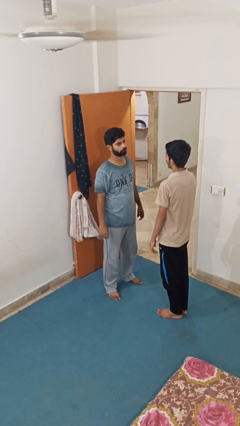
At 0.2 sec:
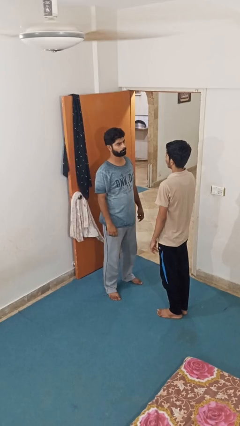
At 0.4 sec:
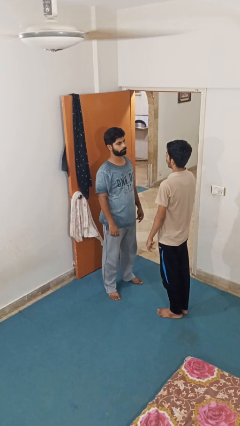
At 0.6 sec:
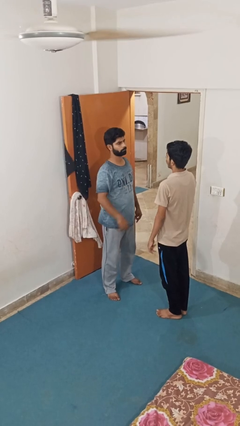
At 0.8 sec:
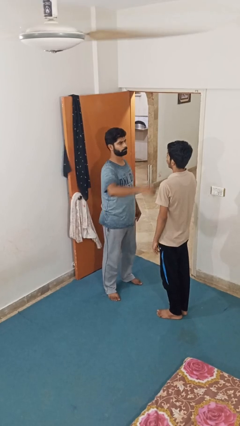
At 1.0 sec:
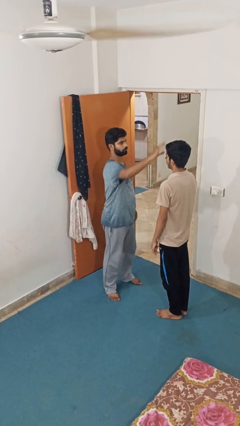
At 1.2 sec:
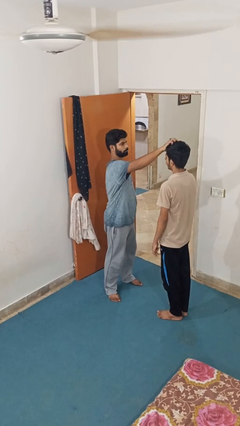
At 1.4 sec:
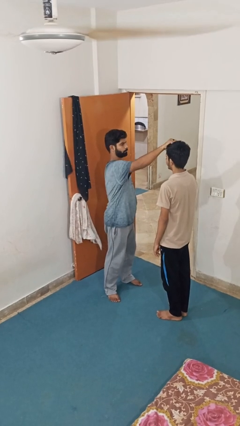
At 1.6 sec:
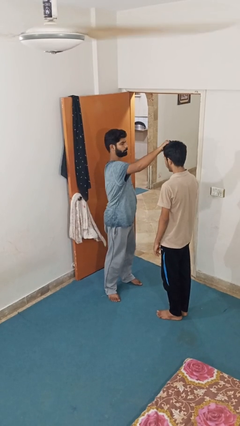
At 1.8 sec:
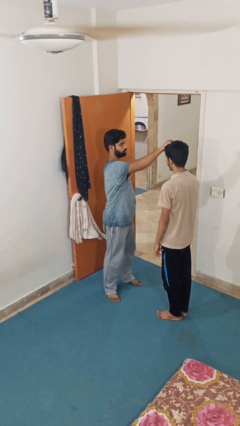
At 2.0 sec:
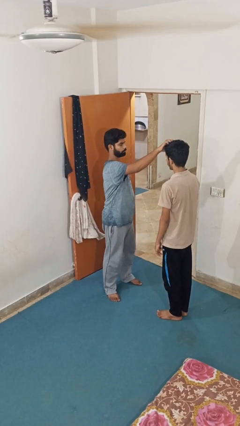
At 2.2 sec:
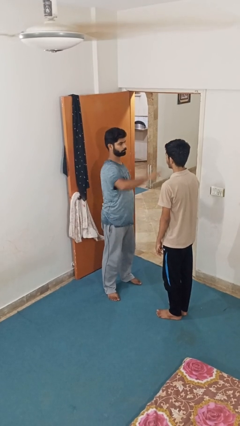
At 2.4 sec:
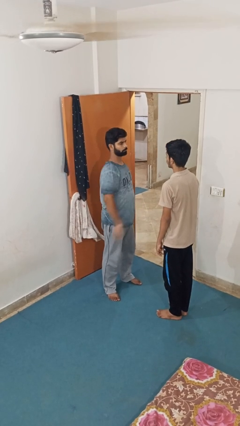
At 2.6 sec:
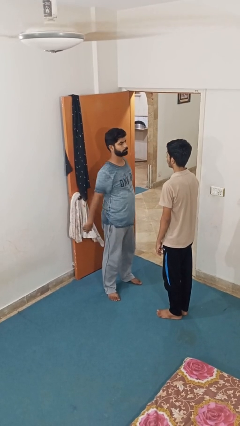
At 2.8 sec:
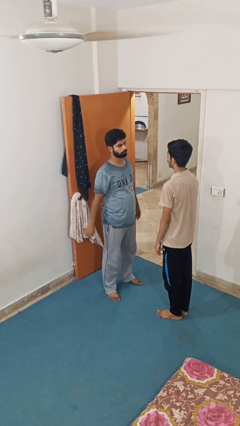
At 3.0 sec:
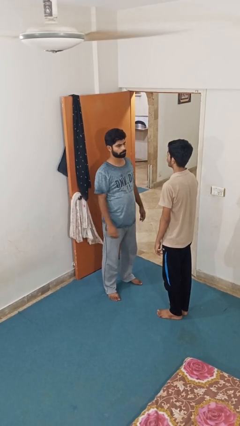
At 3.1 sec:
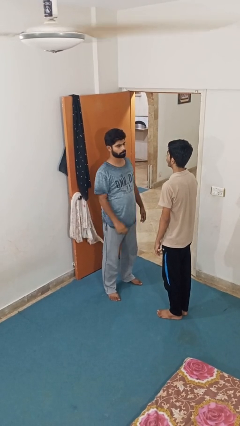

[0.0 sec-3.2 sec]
person grabs person by hair

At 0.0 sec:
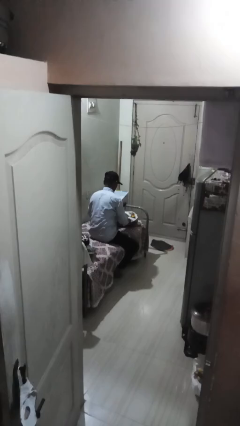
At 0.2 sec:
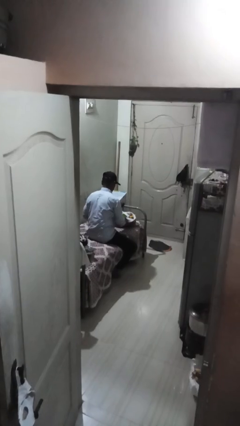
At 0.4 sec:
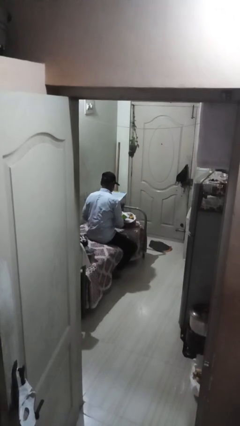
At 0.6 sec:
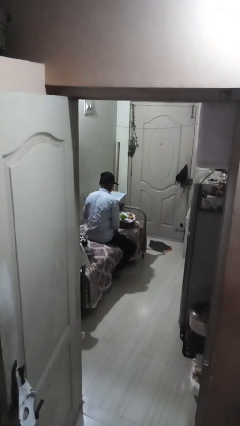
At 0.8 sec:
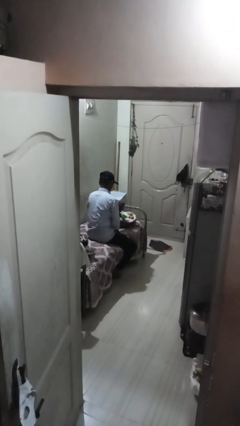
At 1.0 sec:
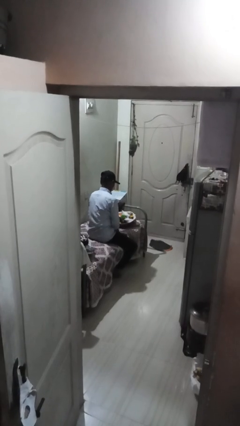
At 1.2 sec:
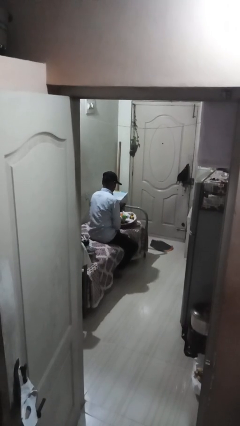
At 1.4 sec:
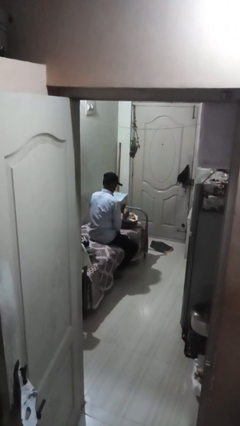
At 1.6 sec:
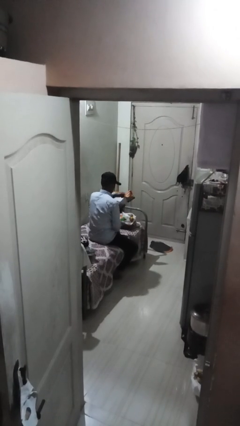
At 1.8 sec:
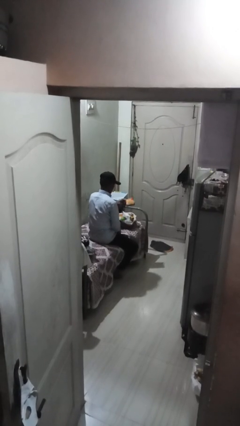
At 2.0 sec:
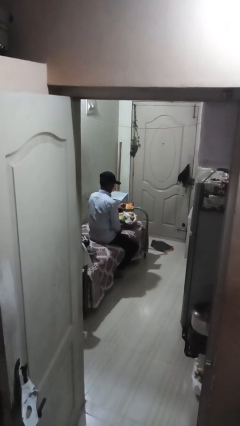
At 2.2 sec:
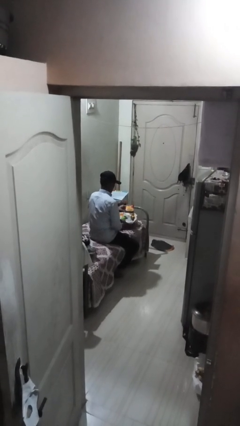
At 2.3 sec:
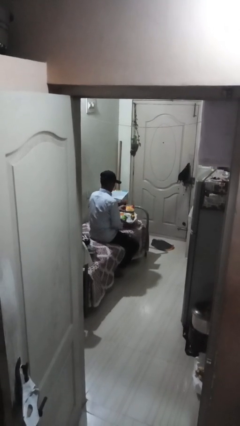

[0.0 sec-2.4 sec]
person takes object from bag

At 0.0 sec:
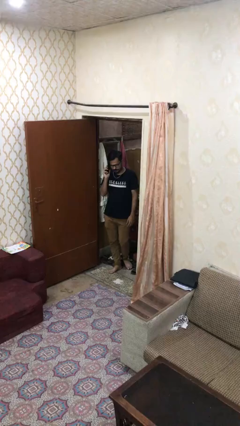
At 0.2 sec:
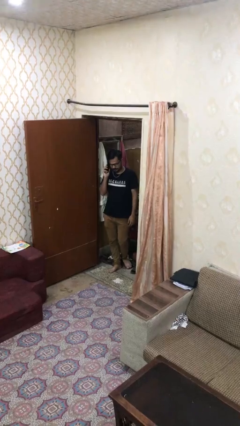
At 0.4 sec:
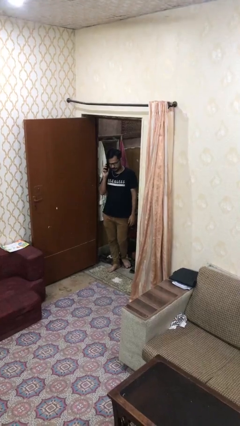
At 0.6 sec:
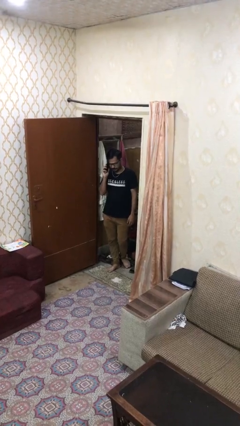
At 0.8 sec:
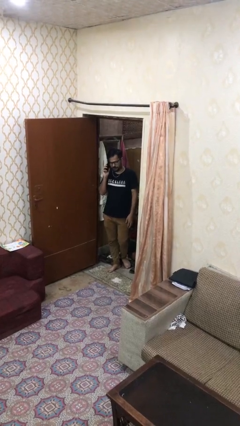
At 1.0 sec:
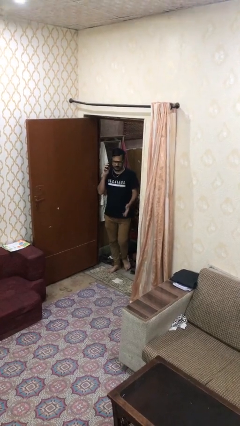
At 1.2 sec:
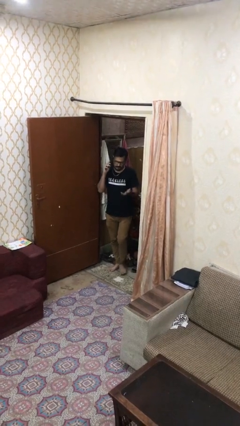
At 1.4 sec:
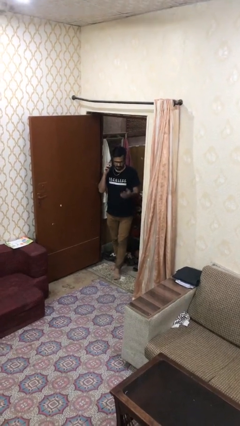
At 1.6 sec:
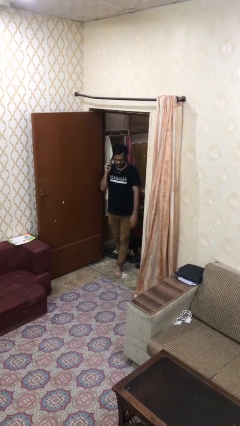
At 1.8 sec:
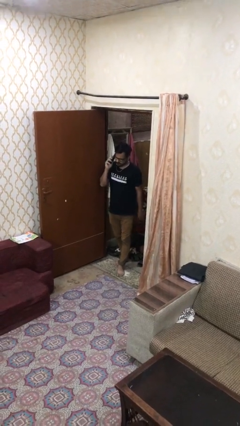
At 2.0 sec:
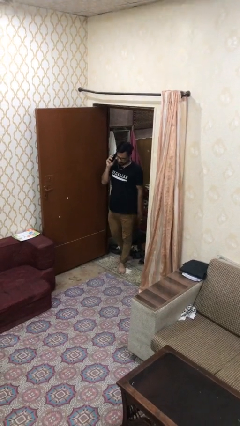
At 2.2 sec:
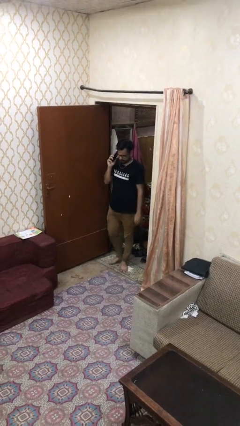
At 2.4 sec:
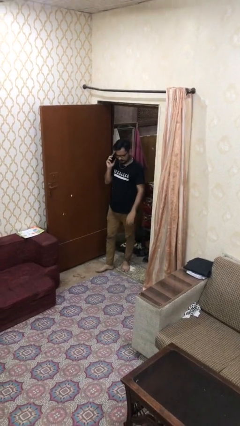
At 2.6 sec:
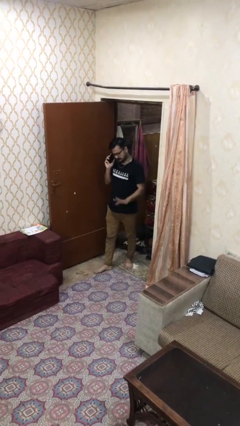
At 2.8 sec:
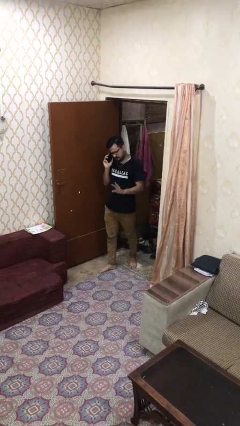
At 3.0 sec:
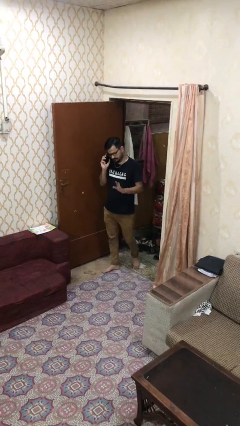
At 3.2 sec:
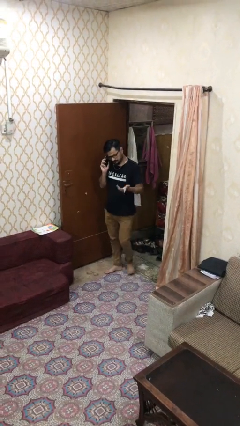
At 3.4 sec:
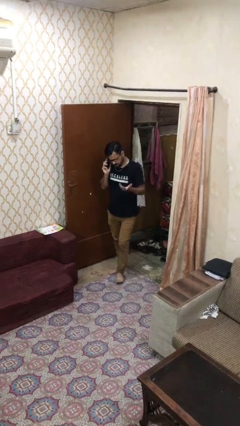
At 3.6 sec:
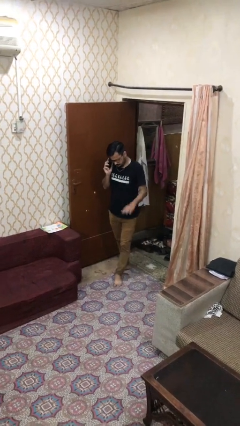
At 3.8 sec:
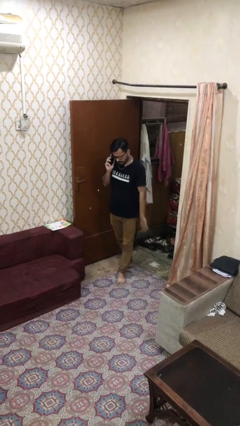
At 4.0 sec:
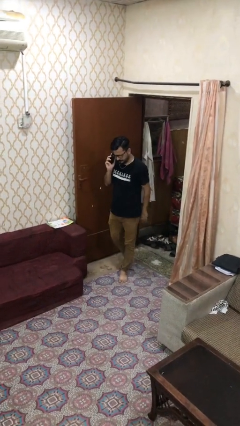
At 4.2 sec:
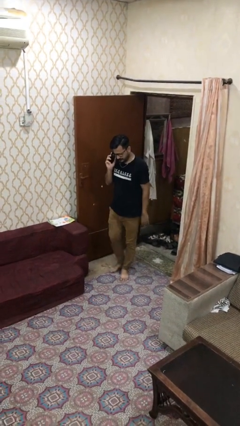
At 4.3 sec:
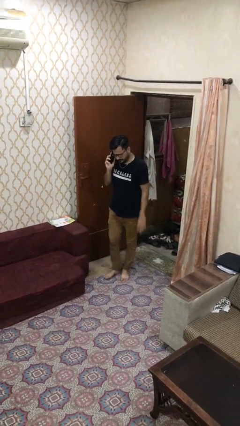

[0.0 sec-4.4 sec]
person enters scene through structure

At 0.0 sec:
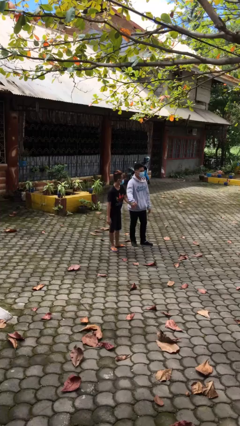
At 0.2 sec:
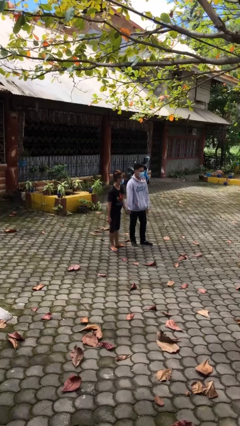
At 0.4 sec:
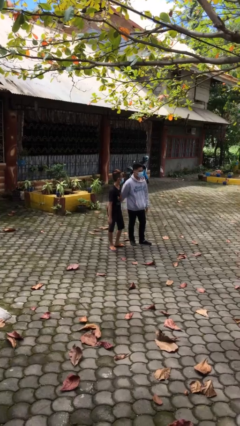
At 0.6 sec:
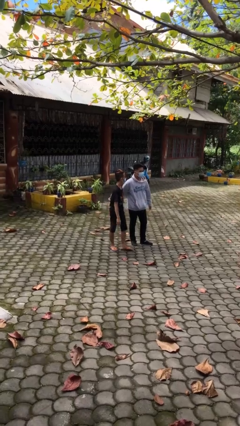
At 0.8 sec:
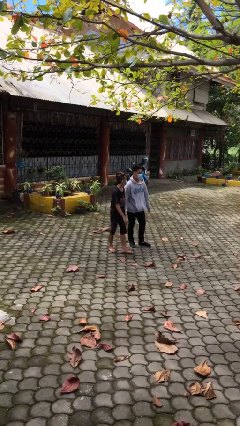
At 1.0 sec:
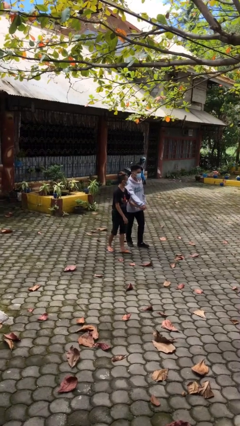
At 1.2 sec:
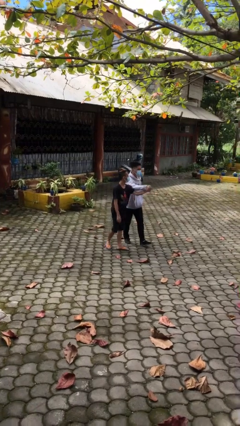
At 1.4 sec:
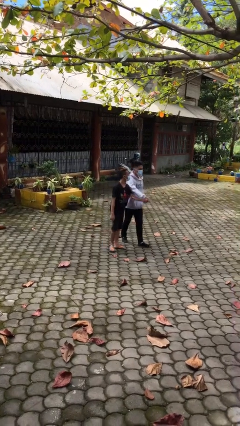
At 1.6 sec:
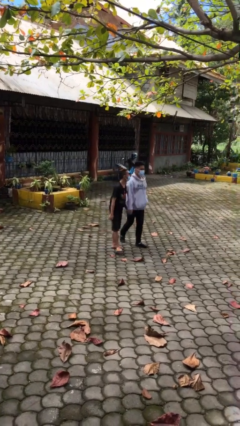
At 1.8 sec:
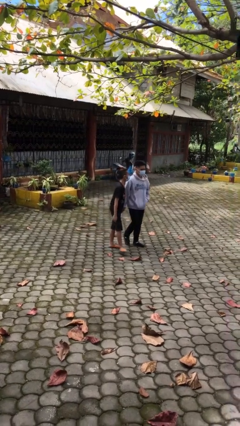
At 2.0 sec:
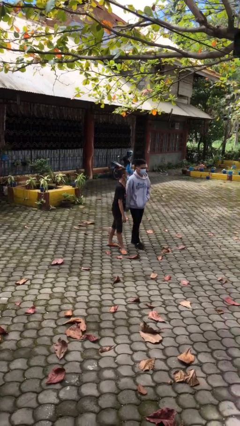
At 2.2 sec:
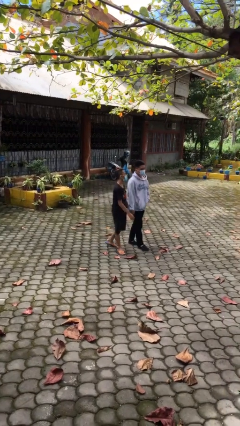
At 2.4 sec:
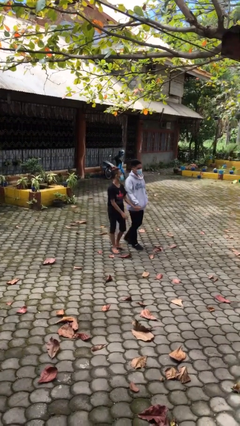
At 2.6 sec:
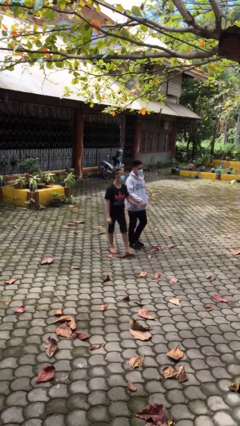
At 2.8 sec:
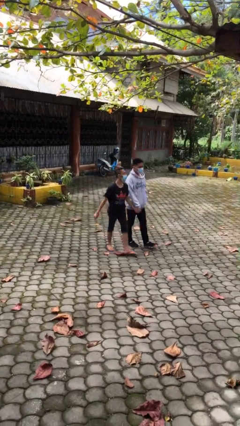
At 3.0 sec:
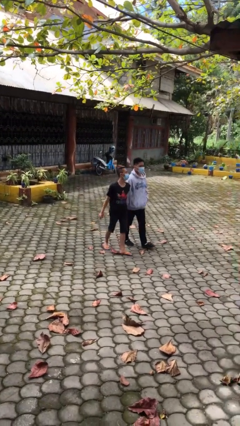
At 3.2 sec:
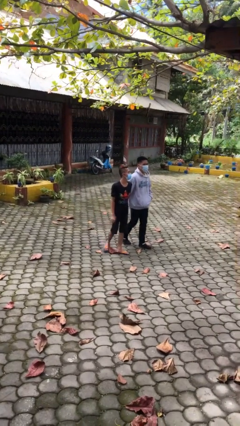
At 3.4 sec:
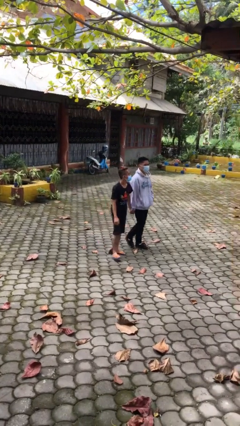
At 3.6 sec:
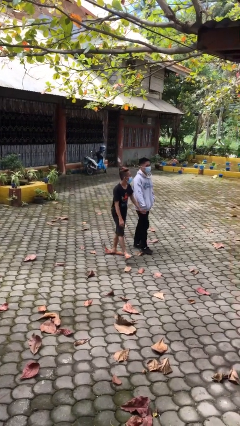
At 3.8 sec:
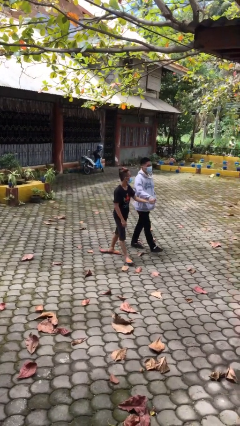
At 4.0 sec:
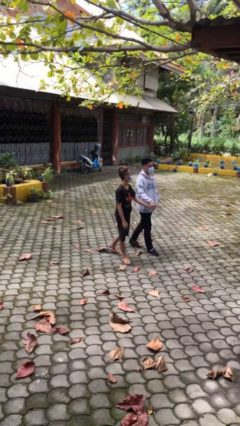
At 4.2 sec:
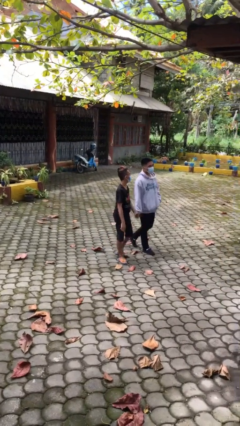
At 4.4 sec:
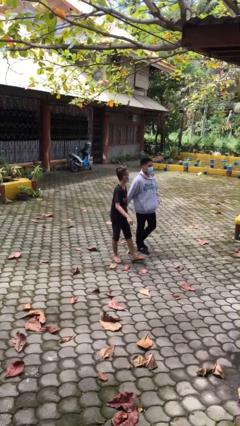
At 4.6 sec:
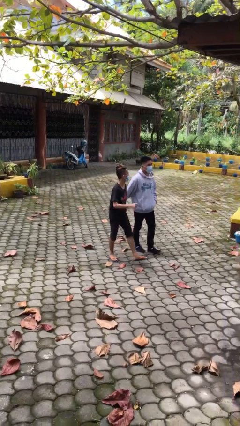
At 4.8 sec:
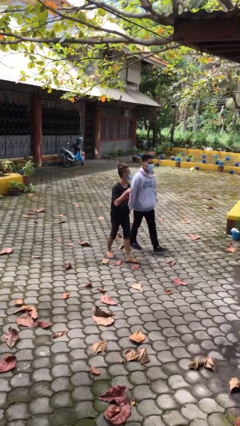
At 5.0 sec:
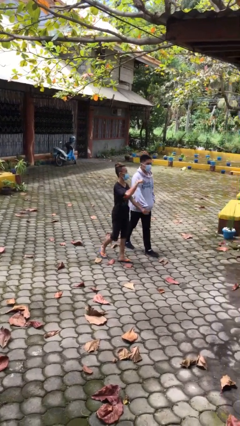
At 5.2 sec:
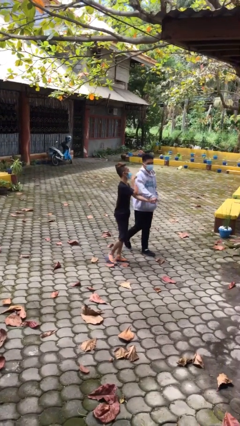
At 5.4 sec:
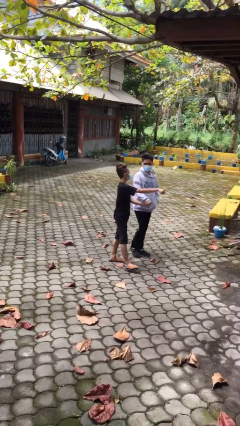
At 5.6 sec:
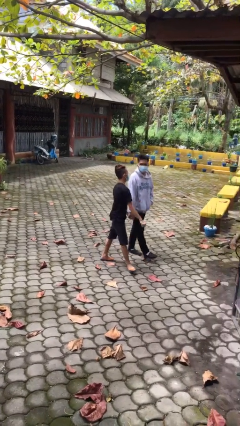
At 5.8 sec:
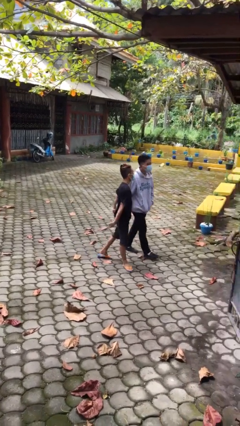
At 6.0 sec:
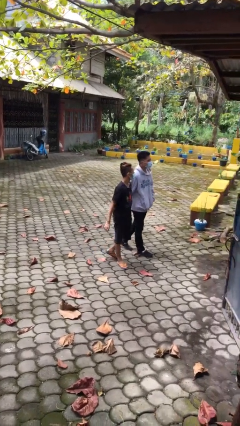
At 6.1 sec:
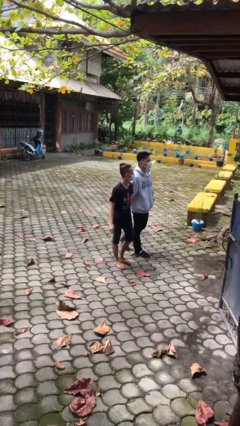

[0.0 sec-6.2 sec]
person holds hand

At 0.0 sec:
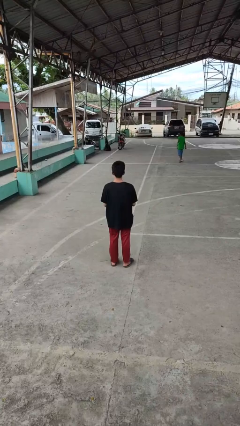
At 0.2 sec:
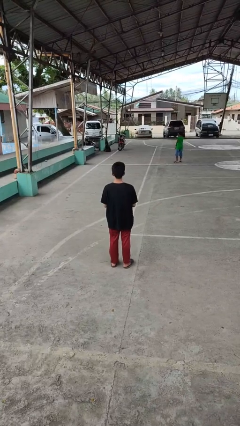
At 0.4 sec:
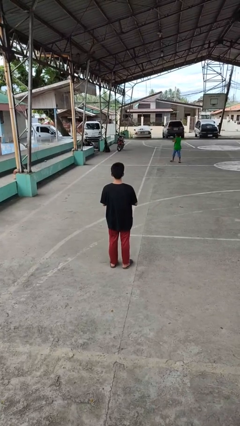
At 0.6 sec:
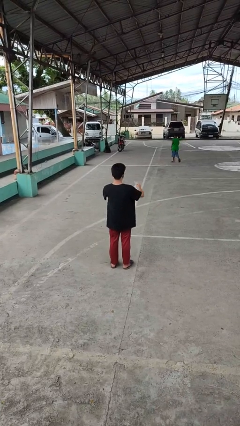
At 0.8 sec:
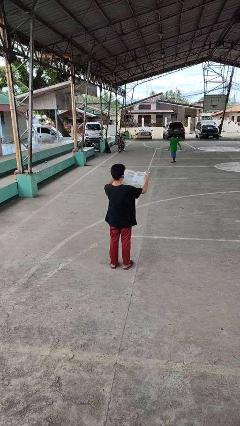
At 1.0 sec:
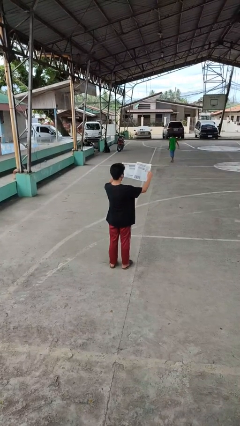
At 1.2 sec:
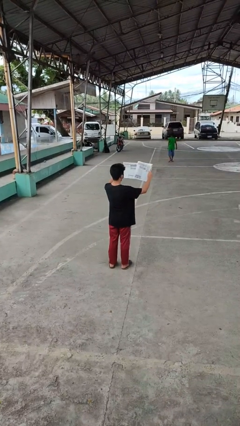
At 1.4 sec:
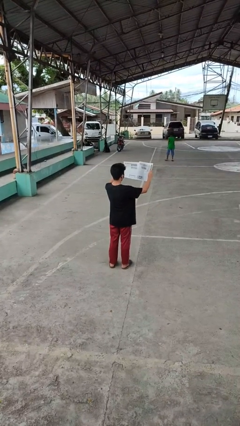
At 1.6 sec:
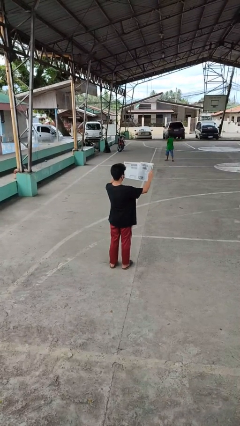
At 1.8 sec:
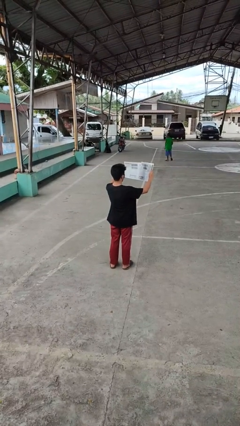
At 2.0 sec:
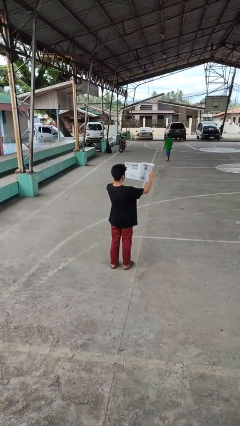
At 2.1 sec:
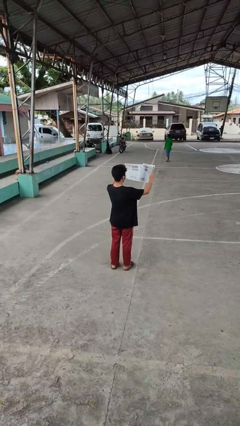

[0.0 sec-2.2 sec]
person reads newspaper
